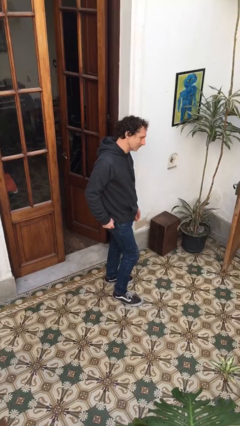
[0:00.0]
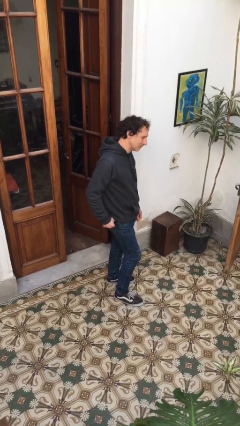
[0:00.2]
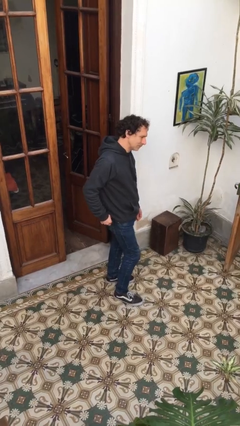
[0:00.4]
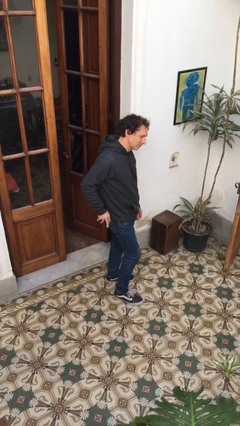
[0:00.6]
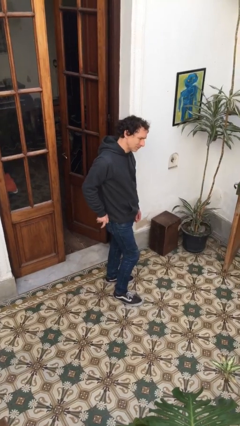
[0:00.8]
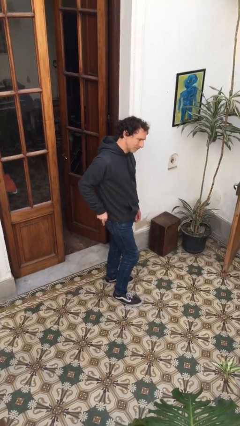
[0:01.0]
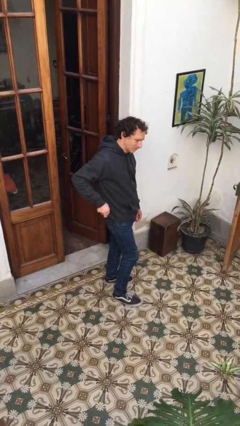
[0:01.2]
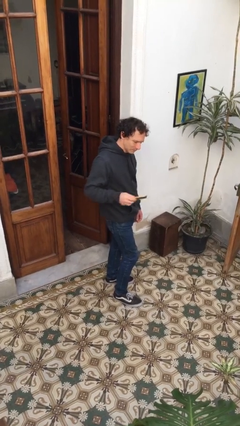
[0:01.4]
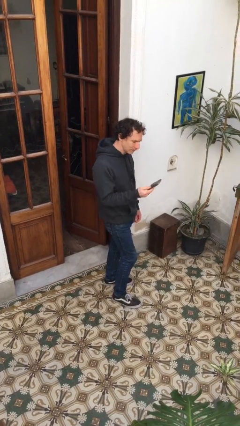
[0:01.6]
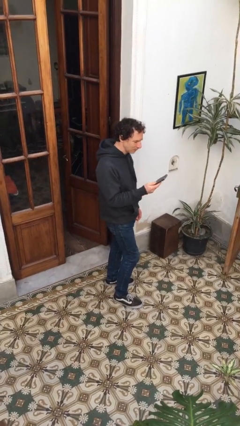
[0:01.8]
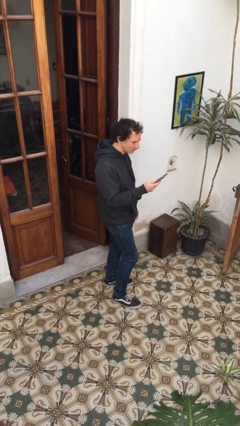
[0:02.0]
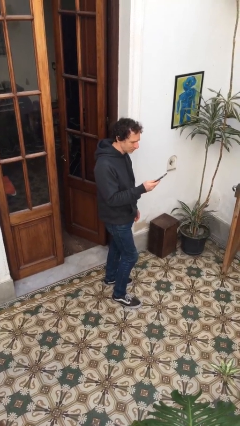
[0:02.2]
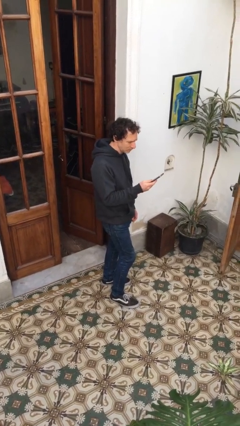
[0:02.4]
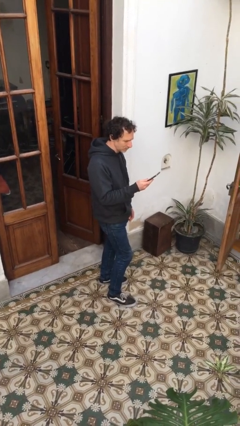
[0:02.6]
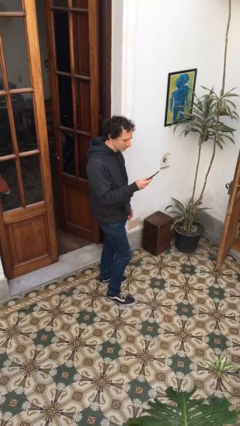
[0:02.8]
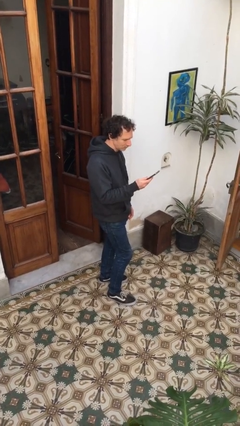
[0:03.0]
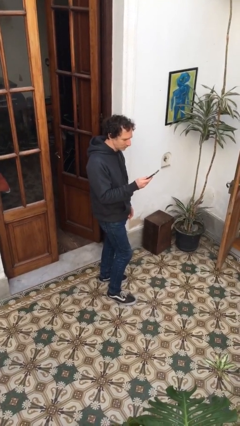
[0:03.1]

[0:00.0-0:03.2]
person takes phone from pocket

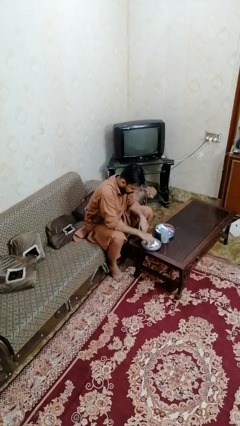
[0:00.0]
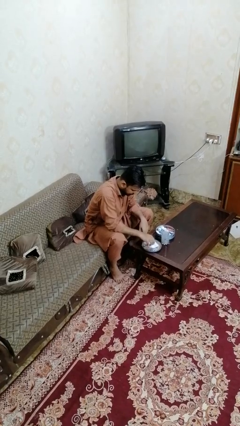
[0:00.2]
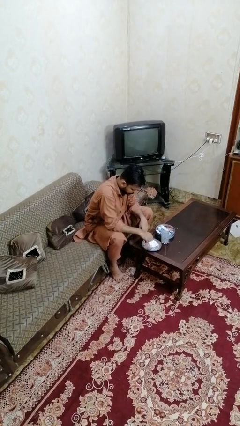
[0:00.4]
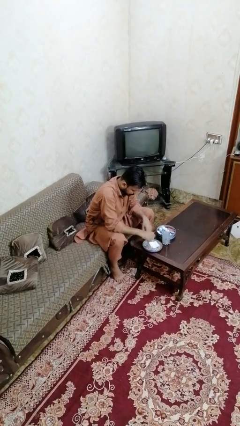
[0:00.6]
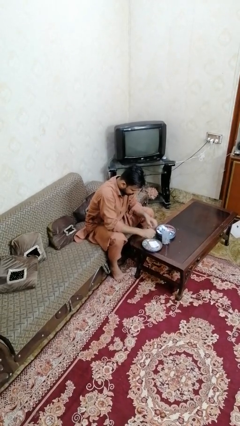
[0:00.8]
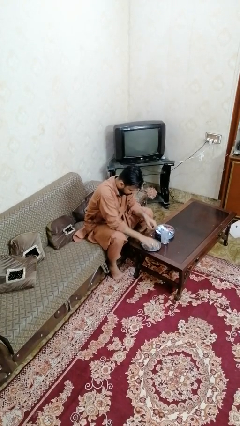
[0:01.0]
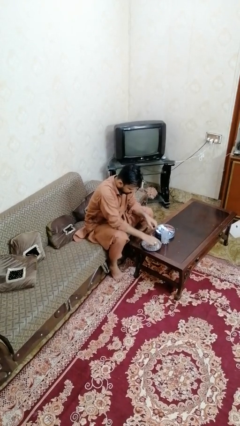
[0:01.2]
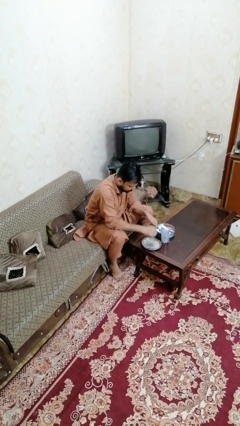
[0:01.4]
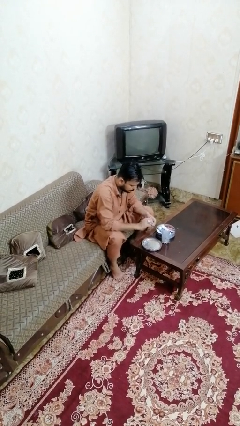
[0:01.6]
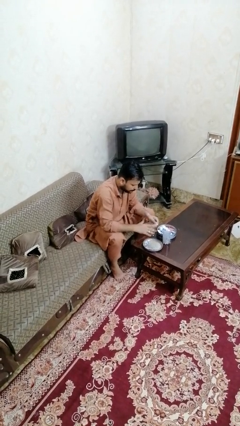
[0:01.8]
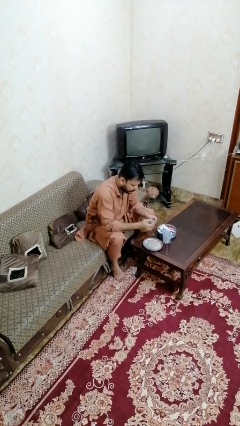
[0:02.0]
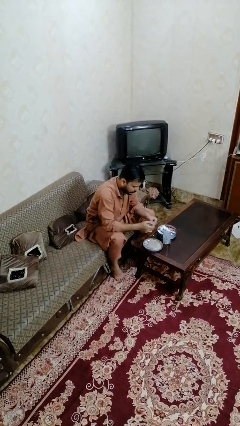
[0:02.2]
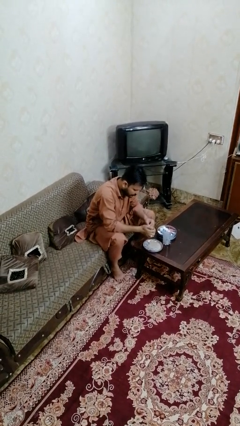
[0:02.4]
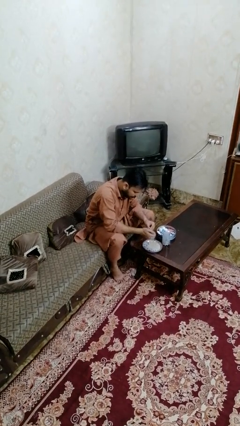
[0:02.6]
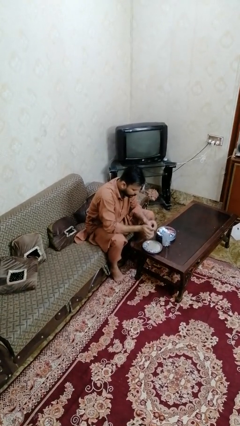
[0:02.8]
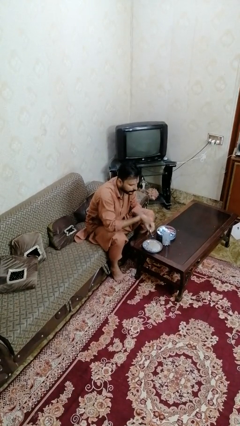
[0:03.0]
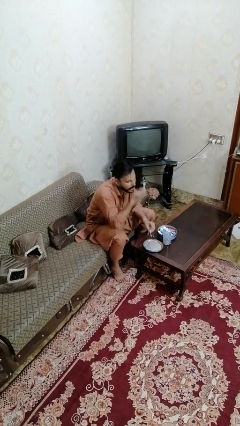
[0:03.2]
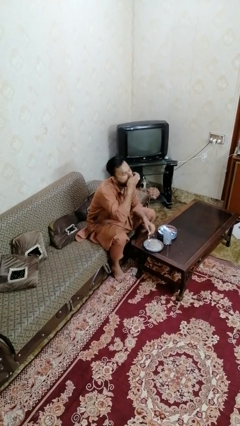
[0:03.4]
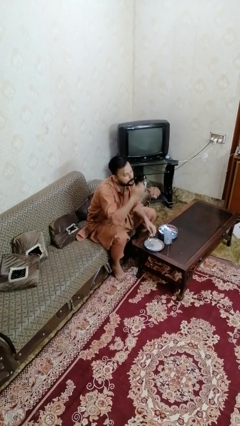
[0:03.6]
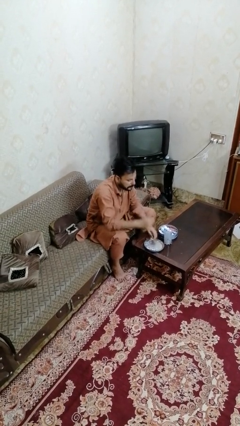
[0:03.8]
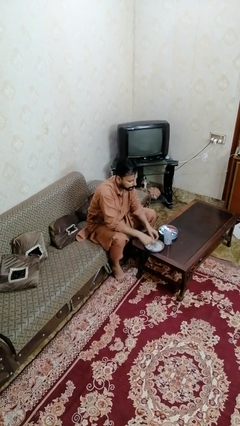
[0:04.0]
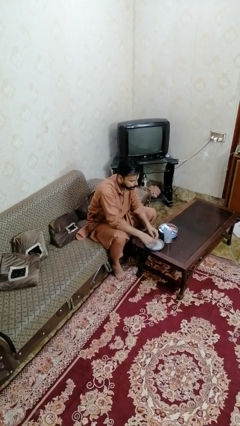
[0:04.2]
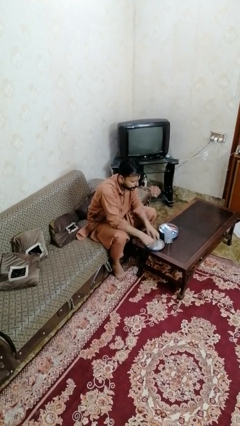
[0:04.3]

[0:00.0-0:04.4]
person takes medicine pills

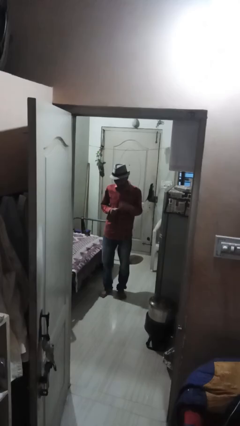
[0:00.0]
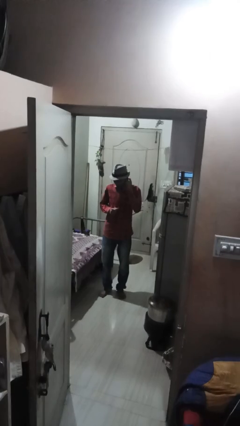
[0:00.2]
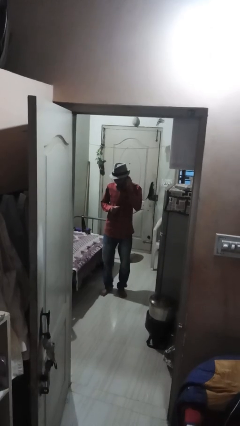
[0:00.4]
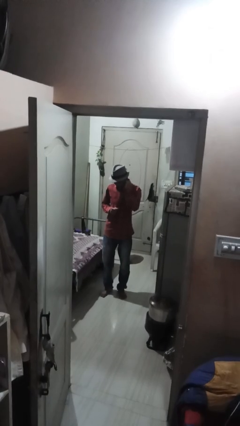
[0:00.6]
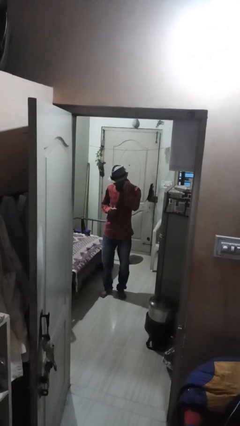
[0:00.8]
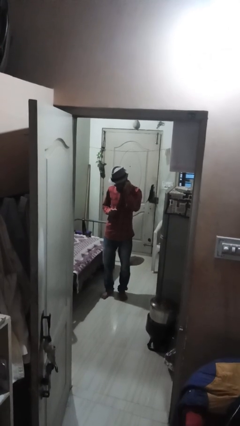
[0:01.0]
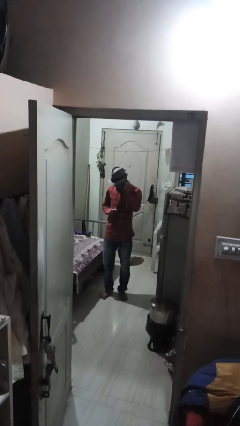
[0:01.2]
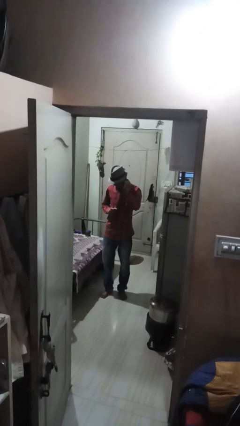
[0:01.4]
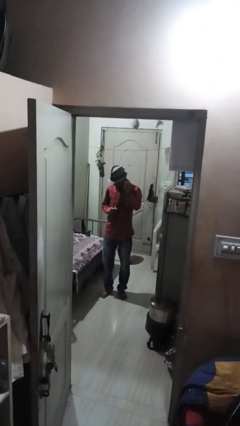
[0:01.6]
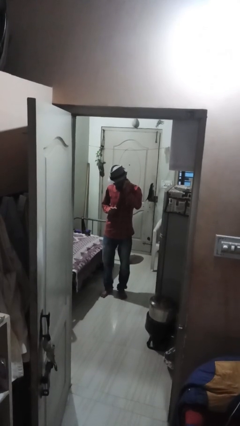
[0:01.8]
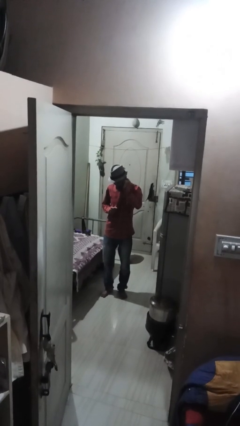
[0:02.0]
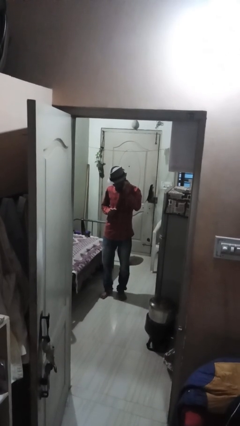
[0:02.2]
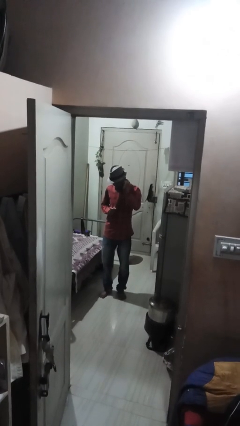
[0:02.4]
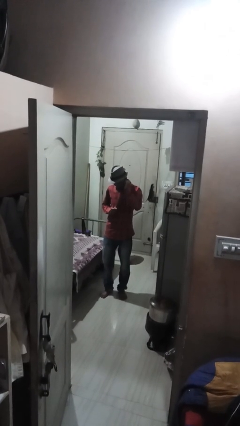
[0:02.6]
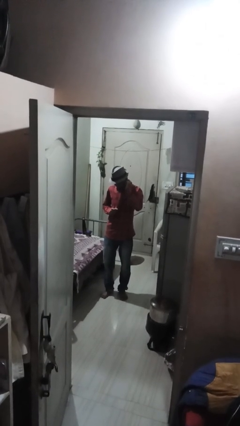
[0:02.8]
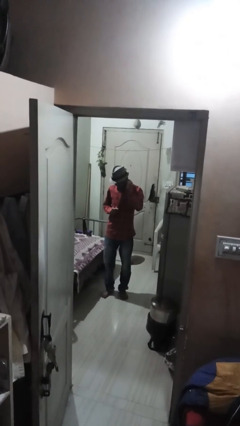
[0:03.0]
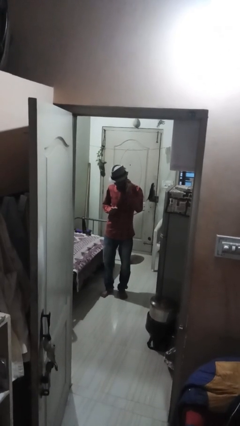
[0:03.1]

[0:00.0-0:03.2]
person touches earlobe

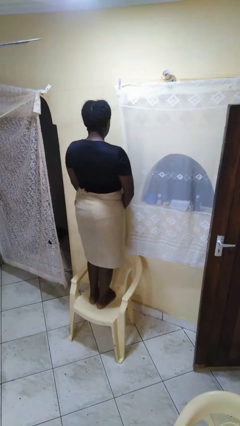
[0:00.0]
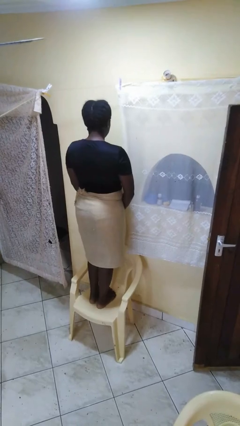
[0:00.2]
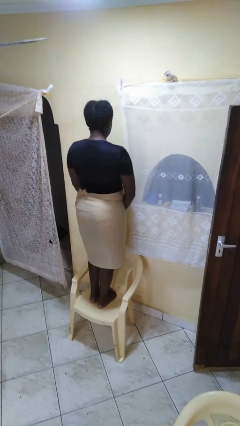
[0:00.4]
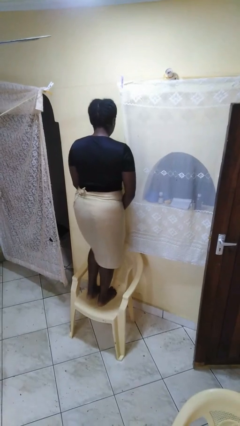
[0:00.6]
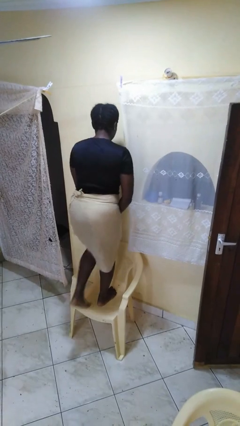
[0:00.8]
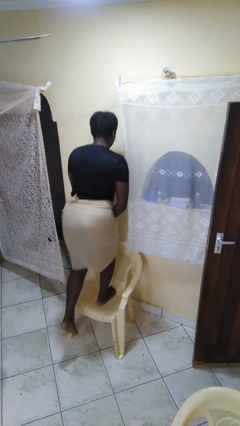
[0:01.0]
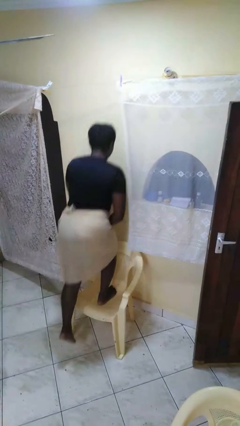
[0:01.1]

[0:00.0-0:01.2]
person climbs off chair

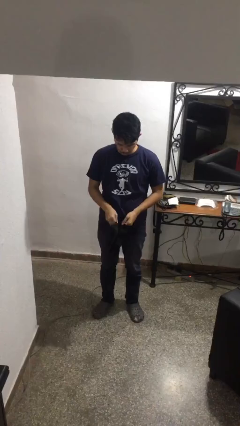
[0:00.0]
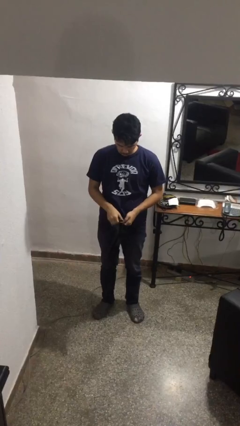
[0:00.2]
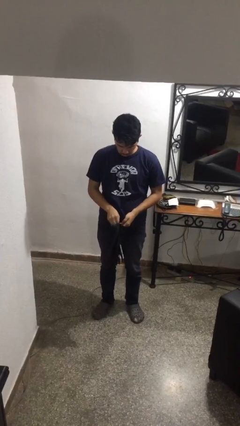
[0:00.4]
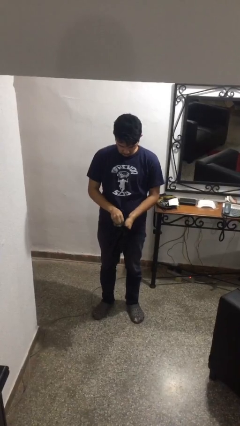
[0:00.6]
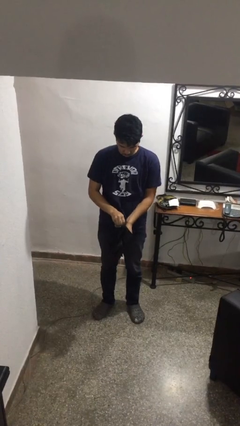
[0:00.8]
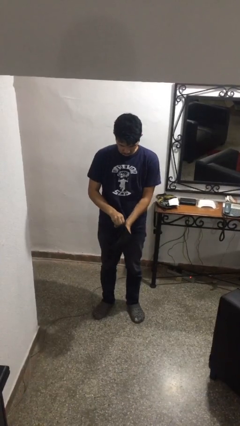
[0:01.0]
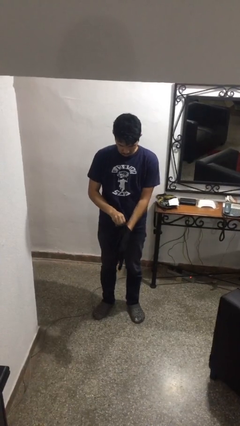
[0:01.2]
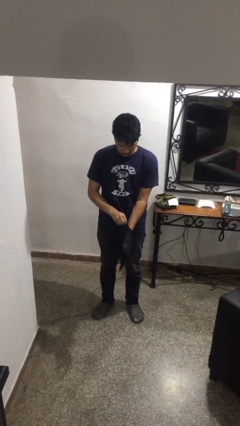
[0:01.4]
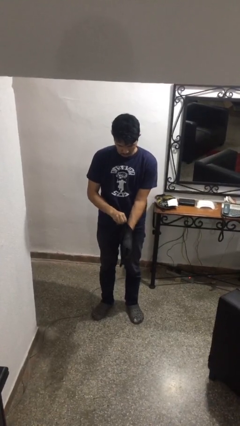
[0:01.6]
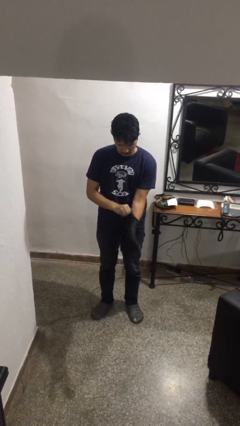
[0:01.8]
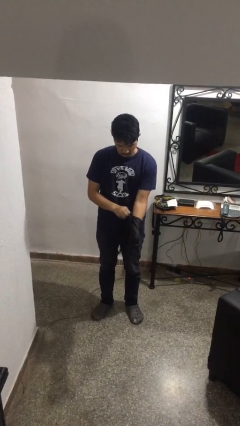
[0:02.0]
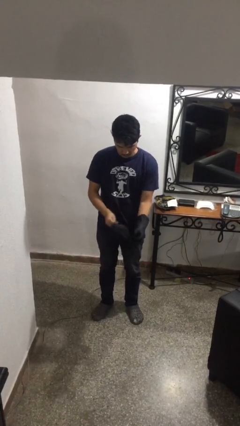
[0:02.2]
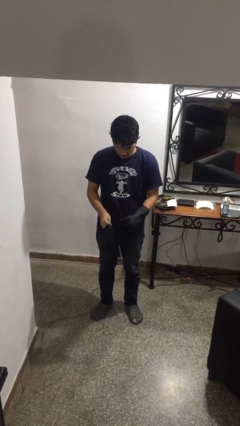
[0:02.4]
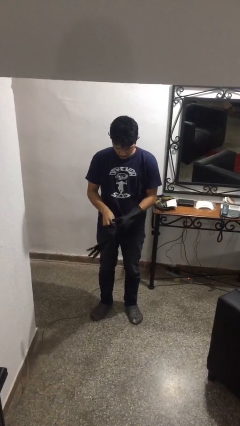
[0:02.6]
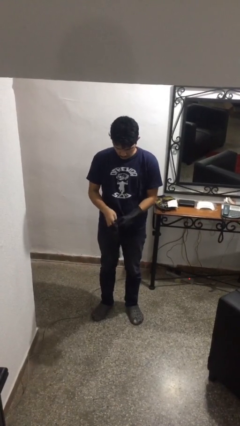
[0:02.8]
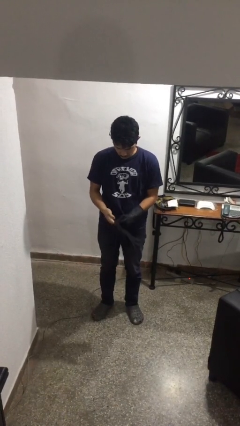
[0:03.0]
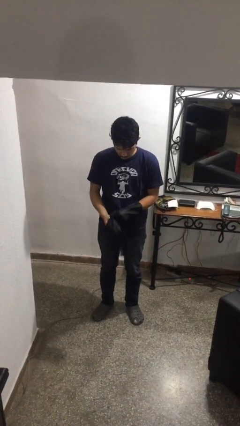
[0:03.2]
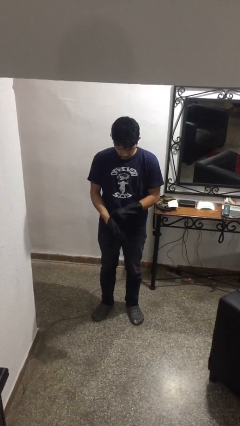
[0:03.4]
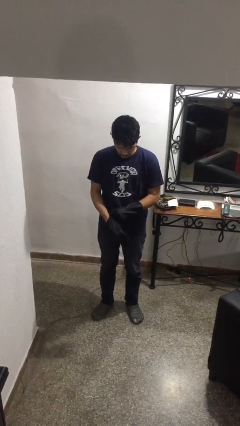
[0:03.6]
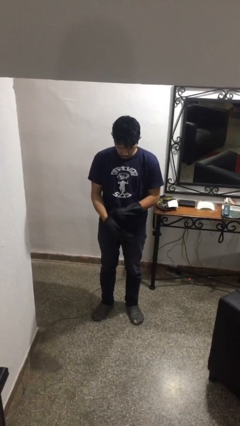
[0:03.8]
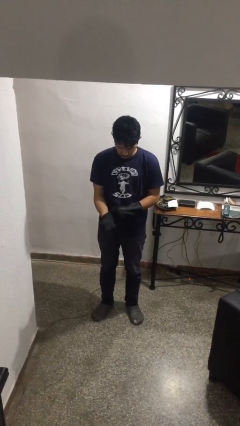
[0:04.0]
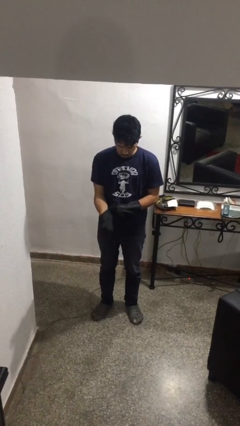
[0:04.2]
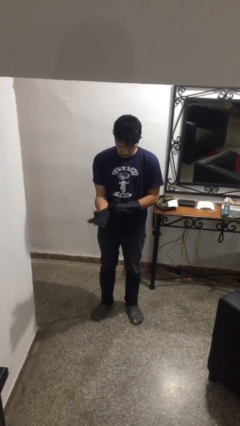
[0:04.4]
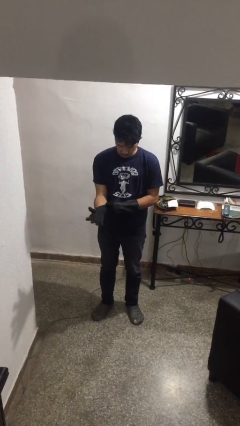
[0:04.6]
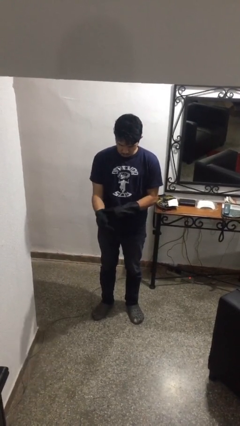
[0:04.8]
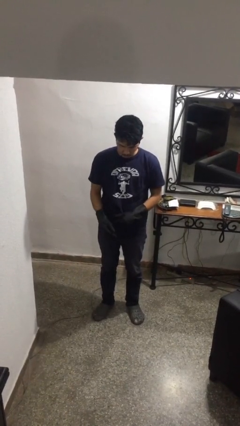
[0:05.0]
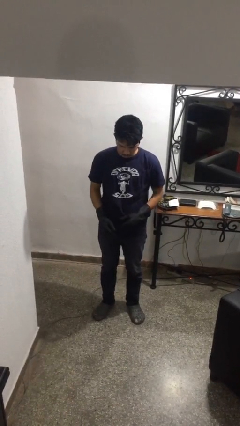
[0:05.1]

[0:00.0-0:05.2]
person puts on gloves

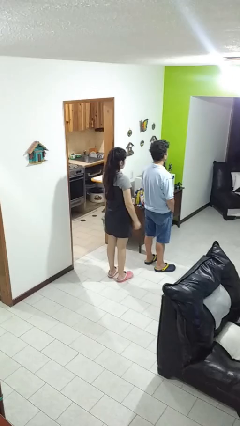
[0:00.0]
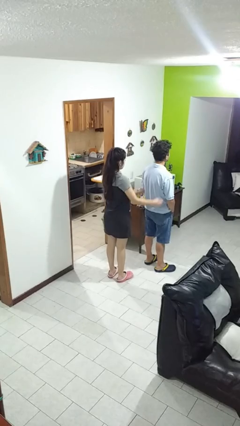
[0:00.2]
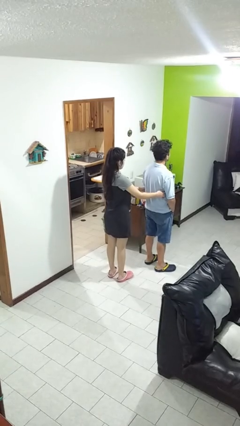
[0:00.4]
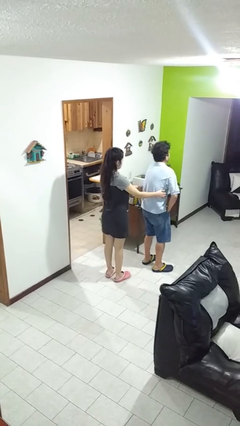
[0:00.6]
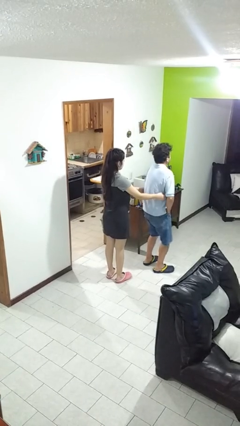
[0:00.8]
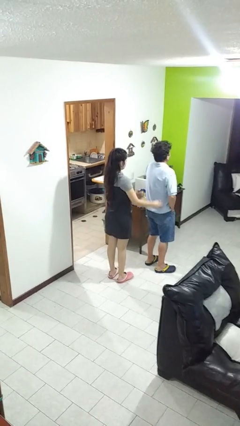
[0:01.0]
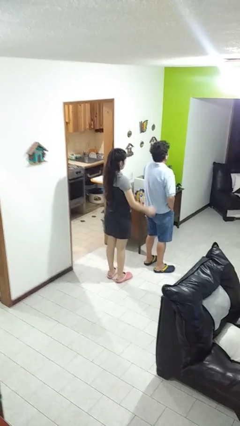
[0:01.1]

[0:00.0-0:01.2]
person tickles person
